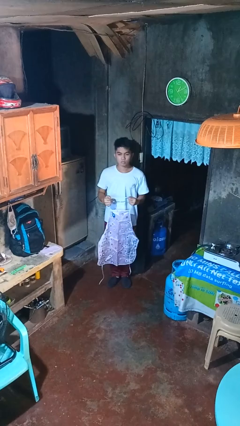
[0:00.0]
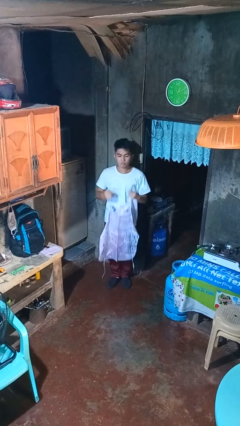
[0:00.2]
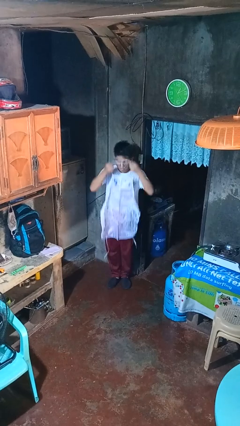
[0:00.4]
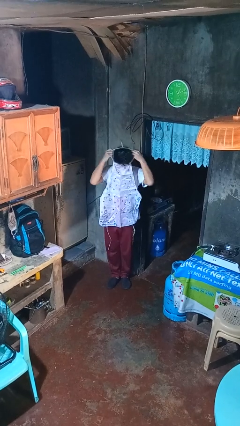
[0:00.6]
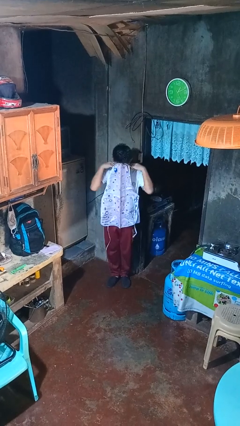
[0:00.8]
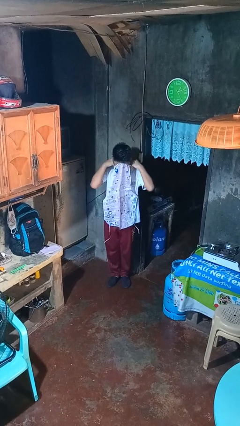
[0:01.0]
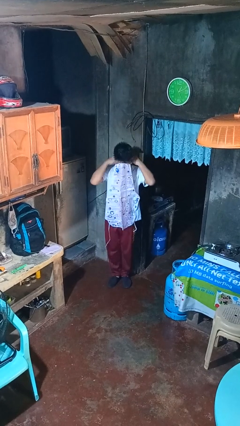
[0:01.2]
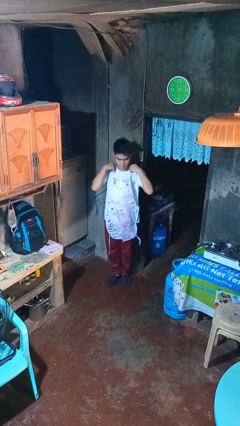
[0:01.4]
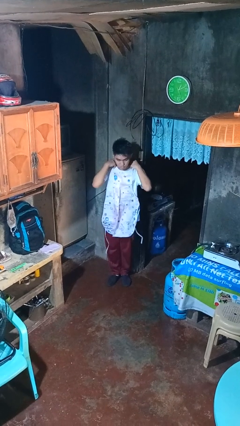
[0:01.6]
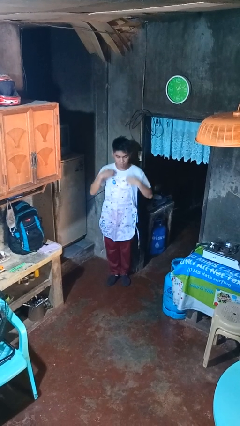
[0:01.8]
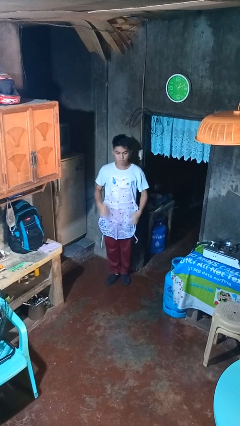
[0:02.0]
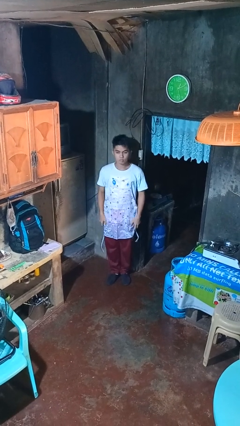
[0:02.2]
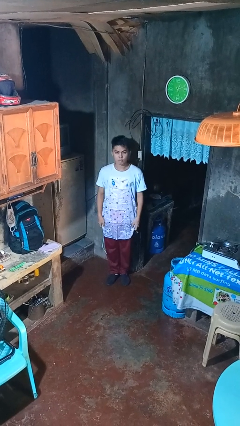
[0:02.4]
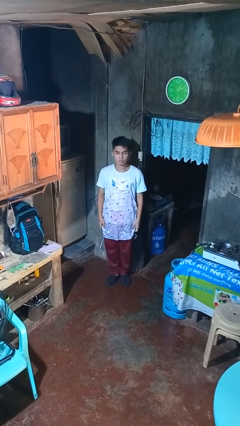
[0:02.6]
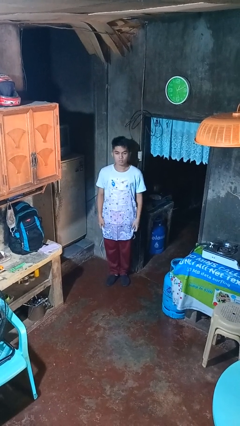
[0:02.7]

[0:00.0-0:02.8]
person puts on apron

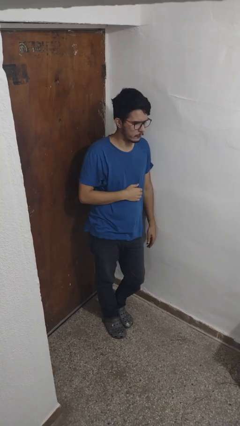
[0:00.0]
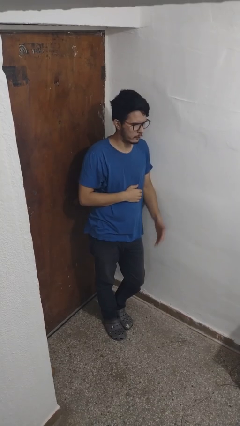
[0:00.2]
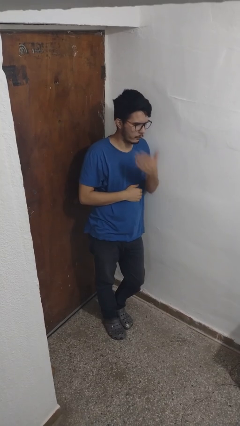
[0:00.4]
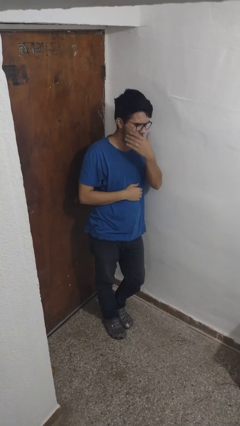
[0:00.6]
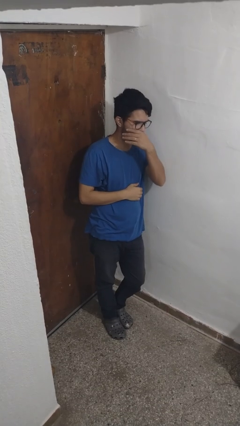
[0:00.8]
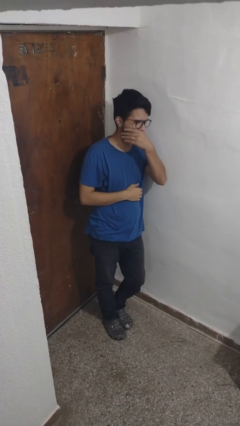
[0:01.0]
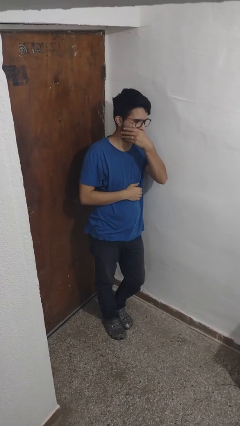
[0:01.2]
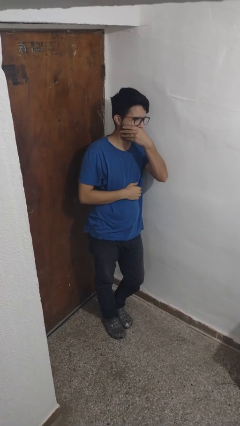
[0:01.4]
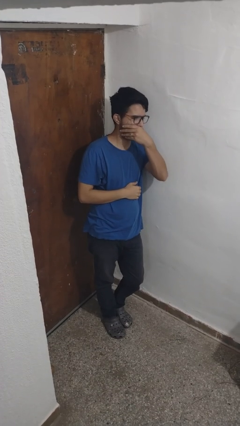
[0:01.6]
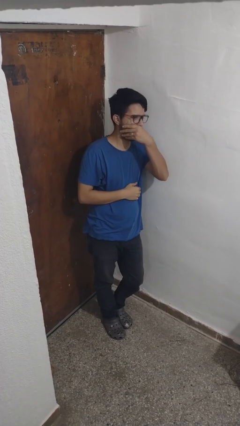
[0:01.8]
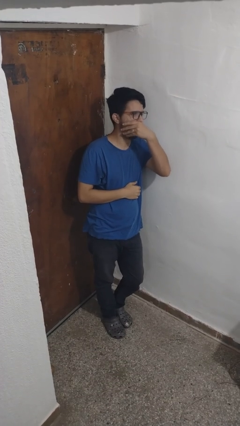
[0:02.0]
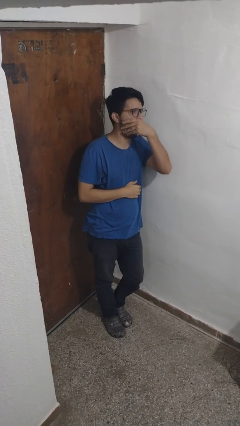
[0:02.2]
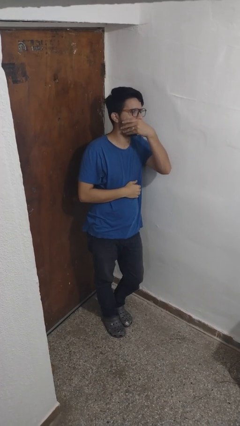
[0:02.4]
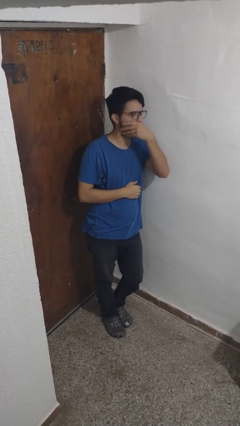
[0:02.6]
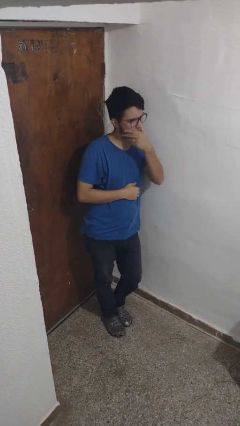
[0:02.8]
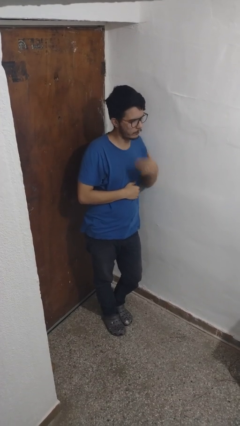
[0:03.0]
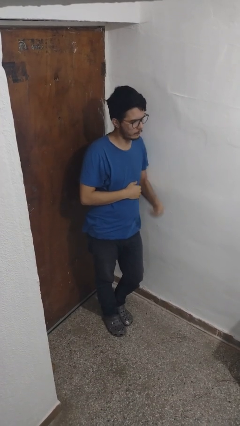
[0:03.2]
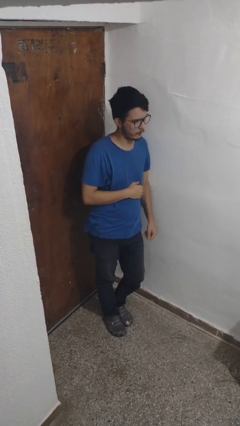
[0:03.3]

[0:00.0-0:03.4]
person yawns

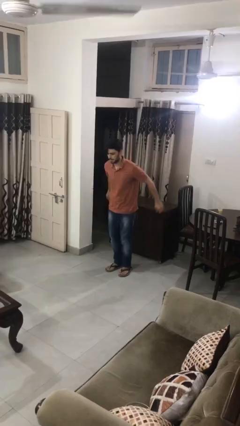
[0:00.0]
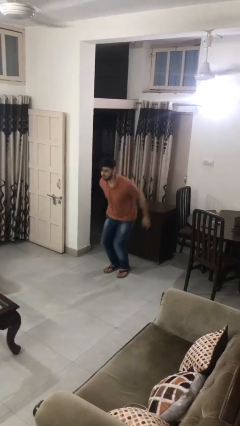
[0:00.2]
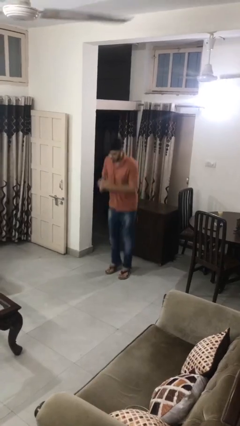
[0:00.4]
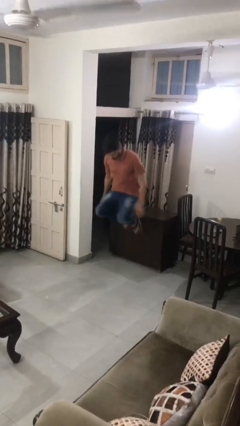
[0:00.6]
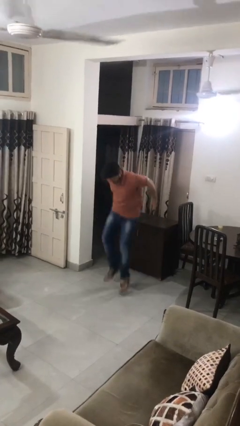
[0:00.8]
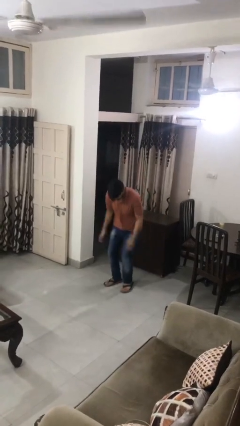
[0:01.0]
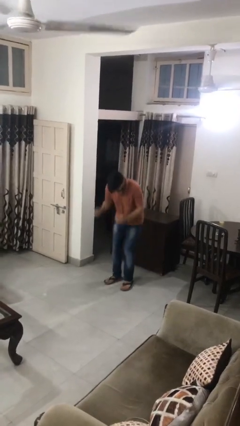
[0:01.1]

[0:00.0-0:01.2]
person jumps

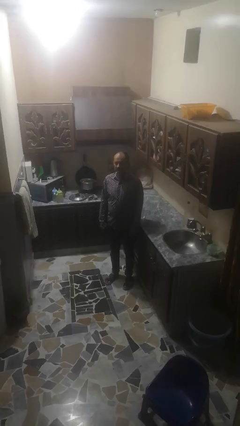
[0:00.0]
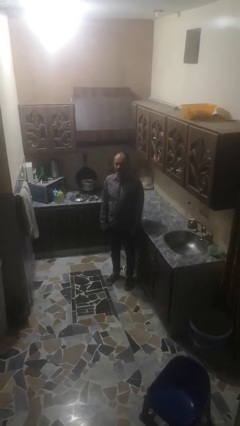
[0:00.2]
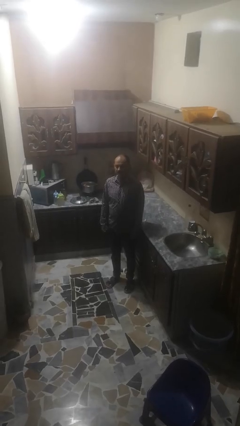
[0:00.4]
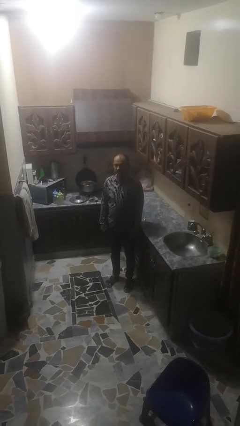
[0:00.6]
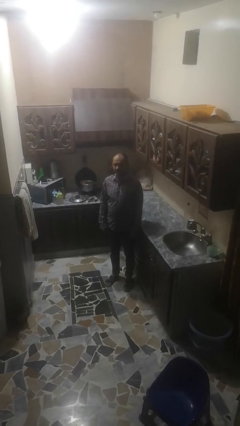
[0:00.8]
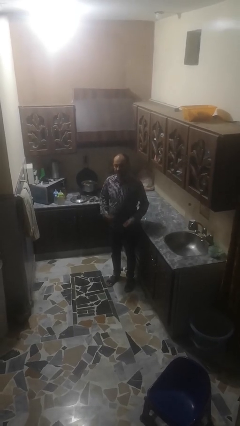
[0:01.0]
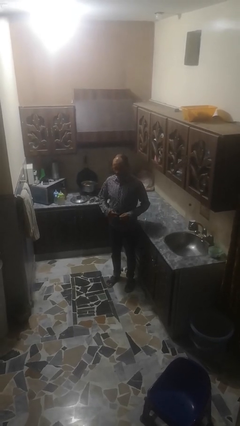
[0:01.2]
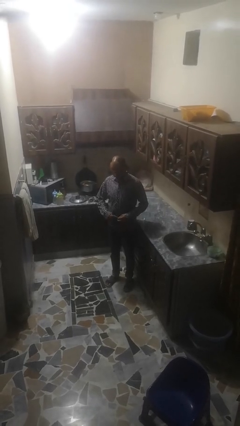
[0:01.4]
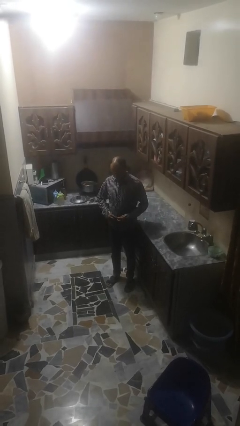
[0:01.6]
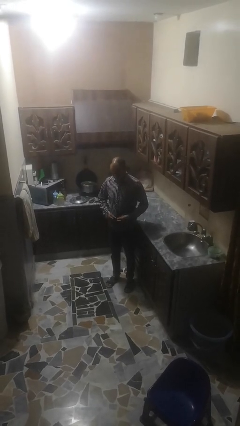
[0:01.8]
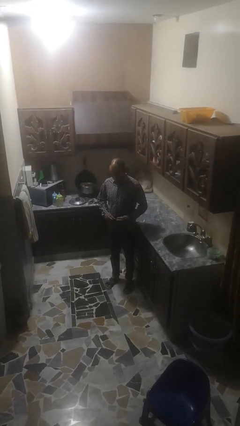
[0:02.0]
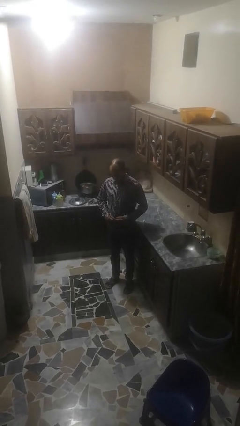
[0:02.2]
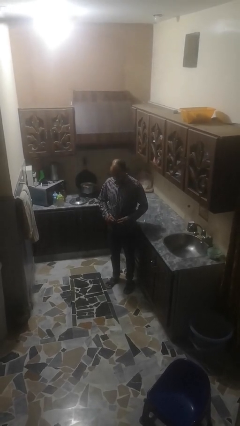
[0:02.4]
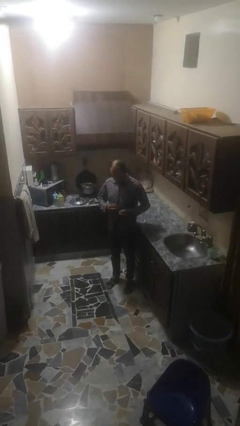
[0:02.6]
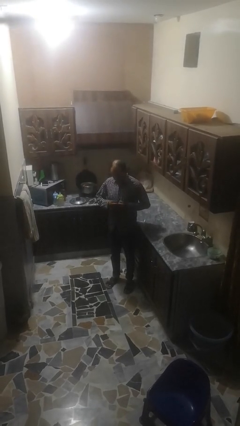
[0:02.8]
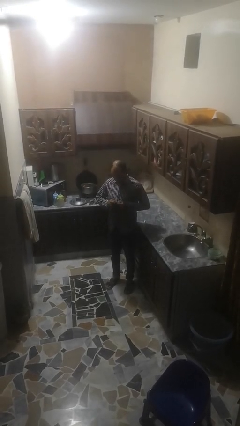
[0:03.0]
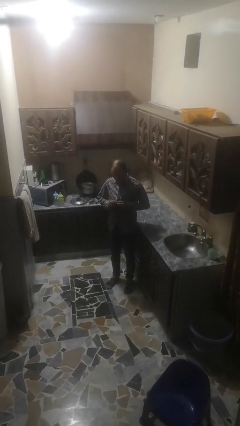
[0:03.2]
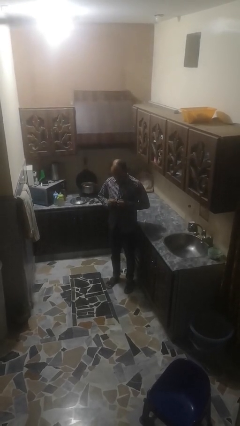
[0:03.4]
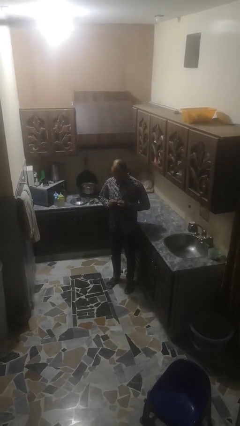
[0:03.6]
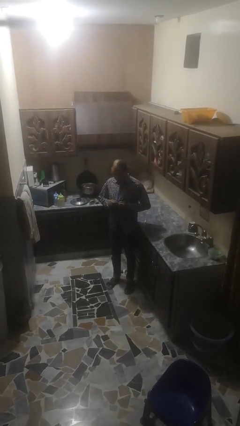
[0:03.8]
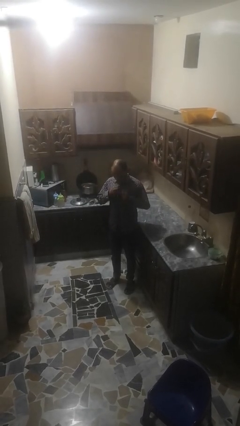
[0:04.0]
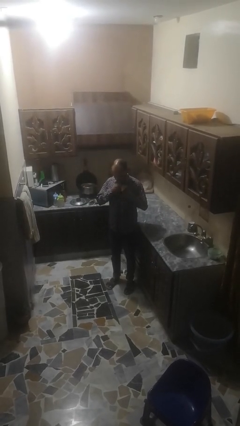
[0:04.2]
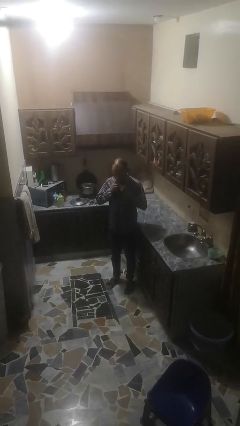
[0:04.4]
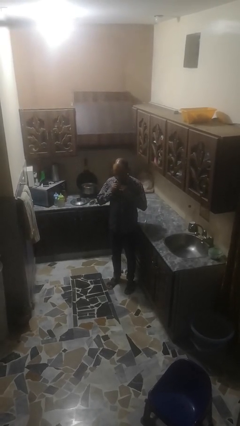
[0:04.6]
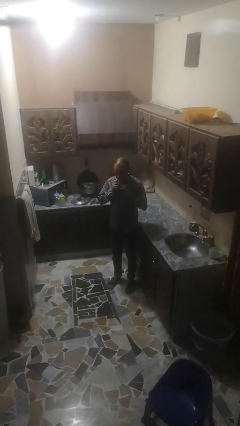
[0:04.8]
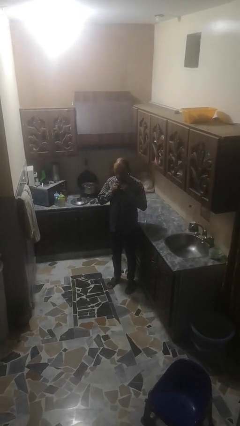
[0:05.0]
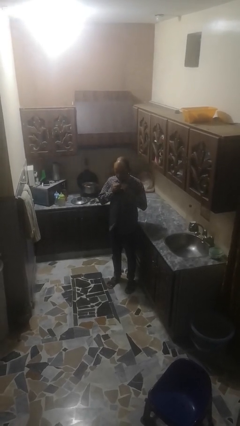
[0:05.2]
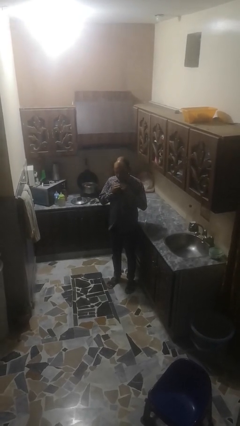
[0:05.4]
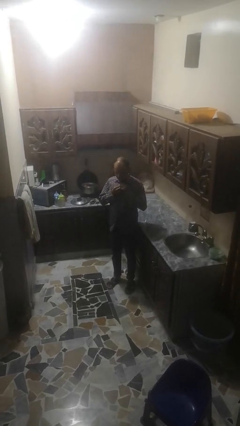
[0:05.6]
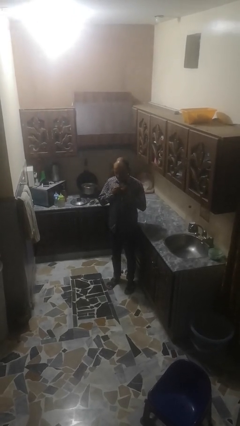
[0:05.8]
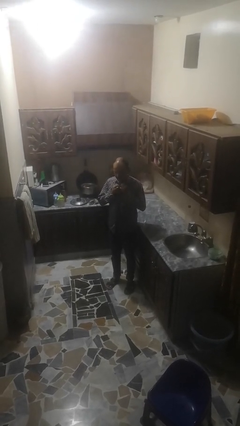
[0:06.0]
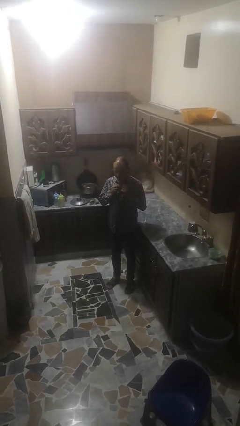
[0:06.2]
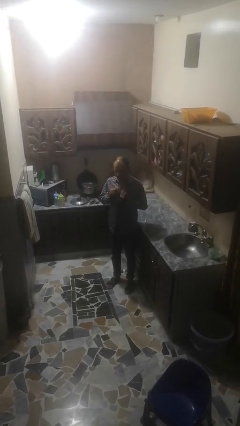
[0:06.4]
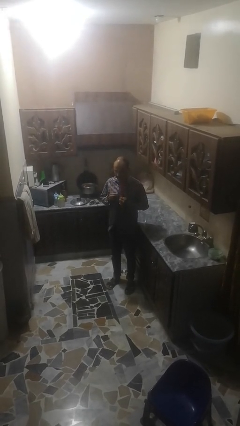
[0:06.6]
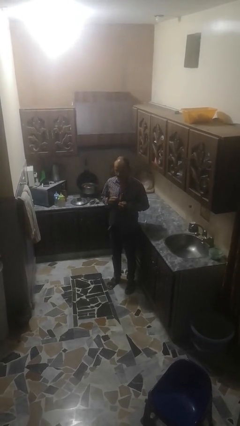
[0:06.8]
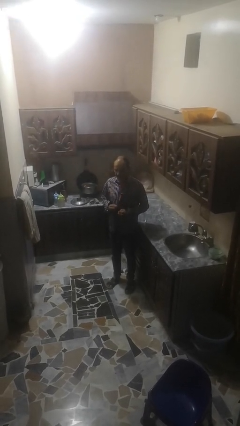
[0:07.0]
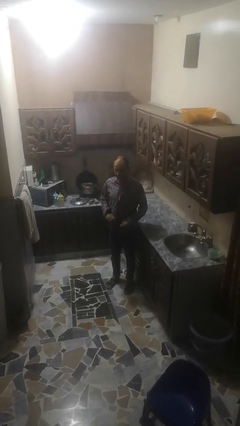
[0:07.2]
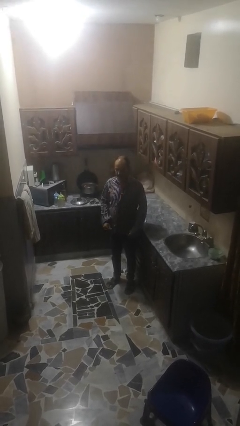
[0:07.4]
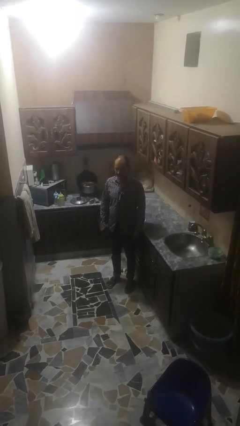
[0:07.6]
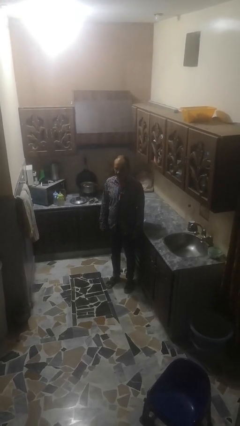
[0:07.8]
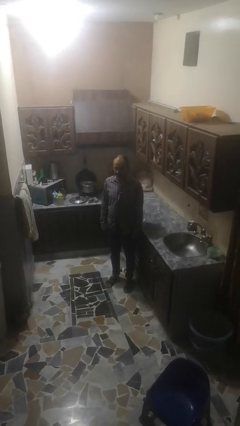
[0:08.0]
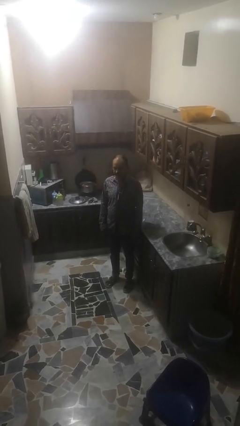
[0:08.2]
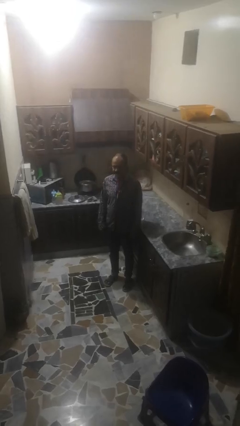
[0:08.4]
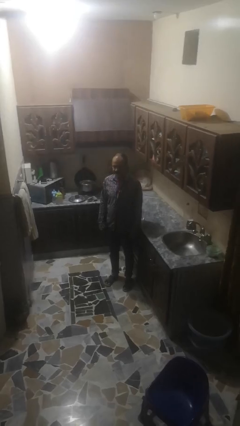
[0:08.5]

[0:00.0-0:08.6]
person unbuttons shirt

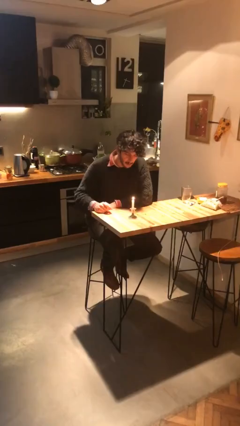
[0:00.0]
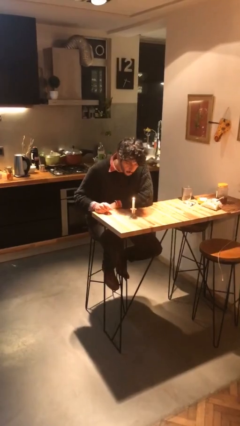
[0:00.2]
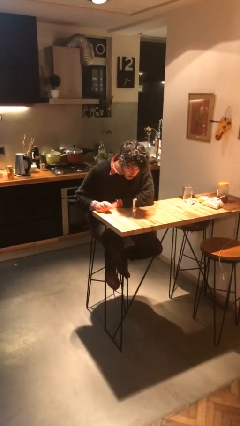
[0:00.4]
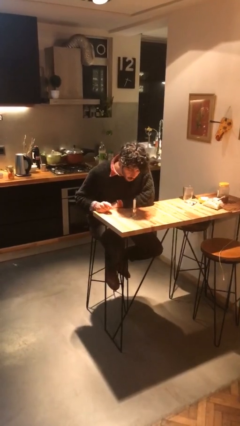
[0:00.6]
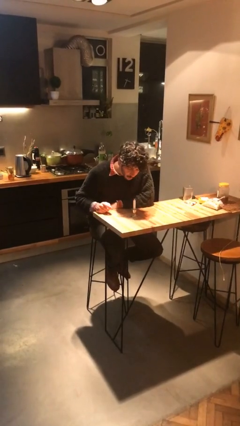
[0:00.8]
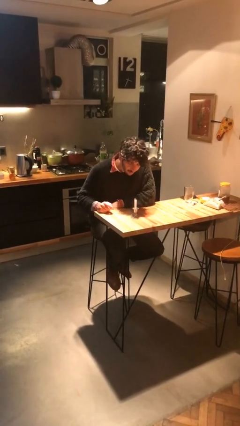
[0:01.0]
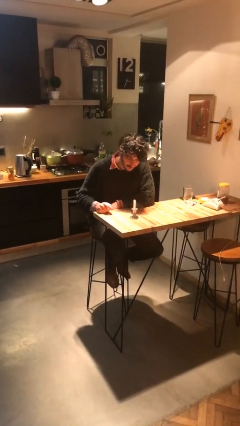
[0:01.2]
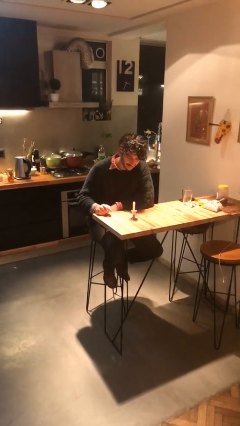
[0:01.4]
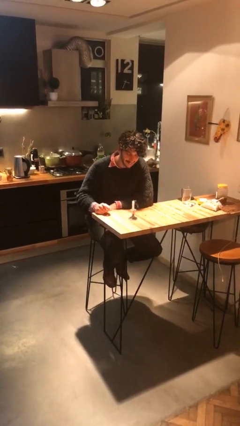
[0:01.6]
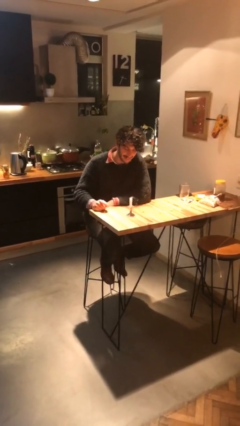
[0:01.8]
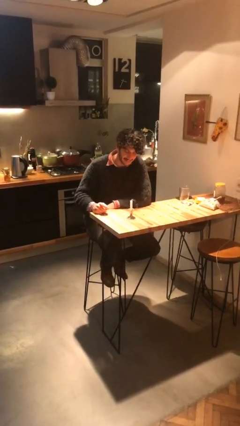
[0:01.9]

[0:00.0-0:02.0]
person extinguishes candle
